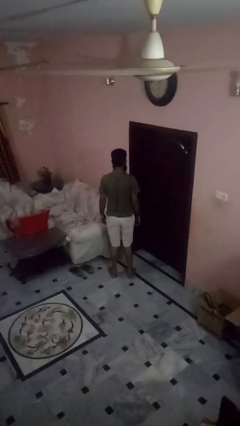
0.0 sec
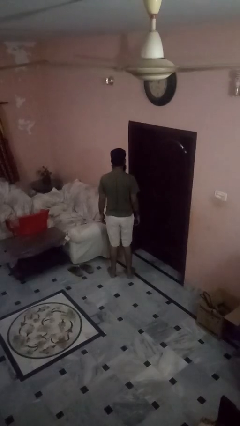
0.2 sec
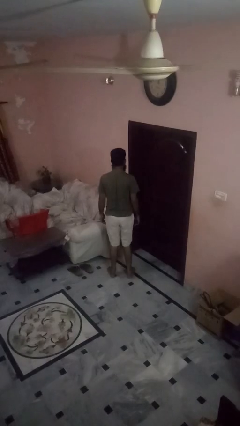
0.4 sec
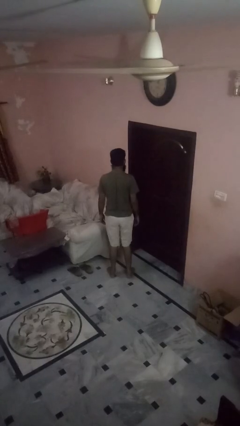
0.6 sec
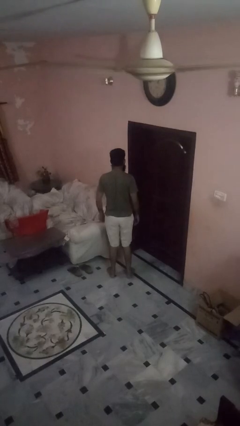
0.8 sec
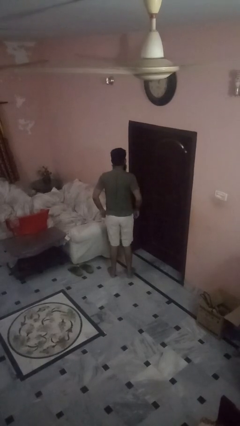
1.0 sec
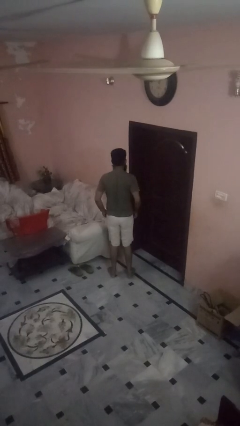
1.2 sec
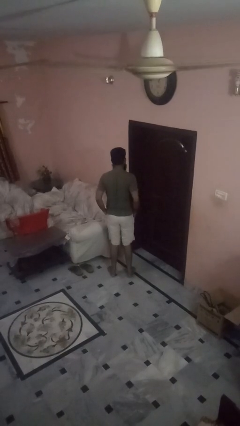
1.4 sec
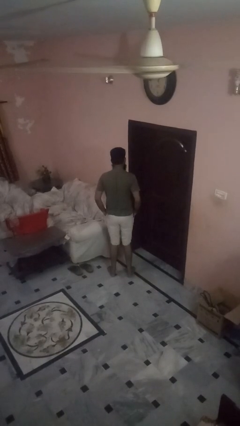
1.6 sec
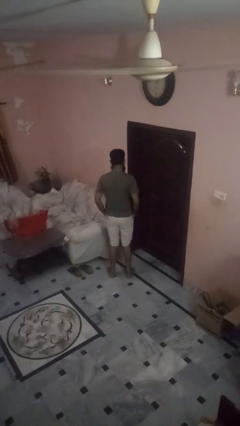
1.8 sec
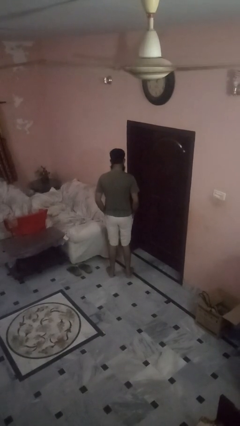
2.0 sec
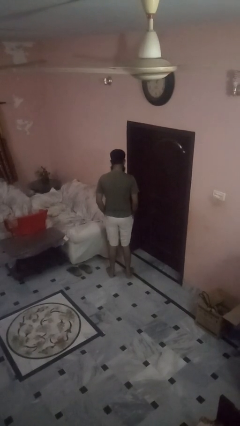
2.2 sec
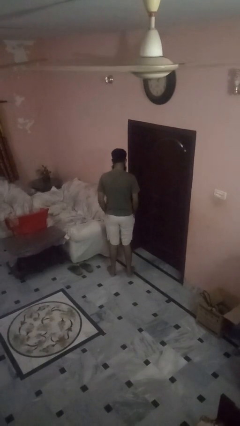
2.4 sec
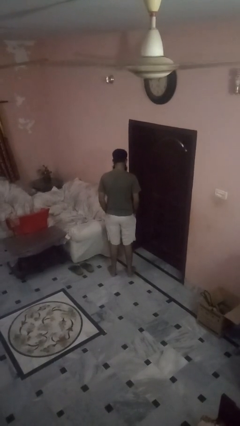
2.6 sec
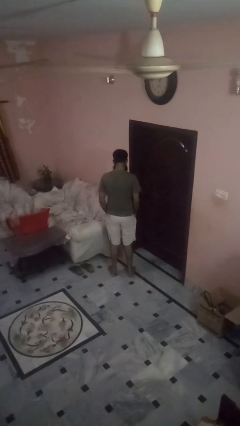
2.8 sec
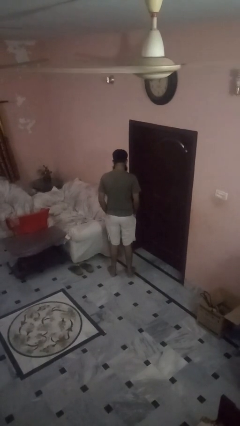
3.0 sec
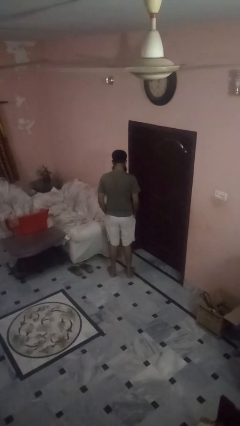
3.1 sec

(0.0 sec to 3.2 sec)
person puts hands in back pockets

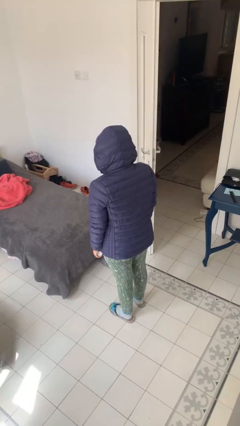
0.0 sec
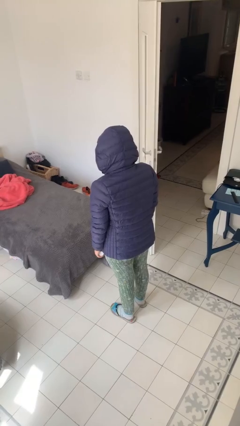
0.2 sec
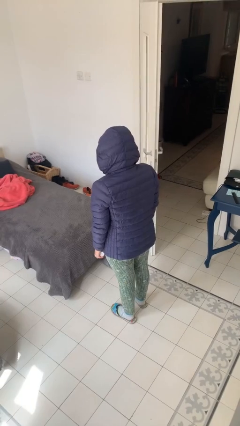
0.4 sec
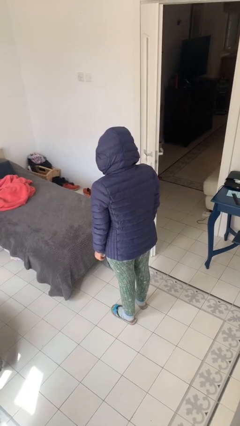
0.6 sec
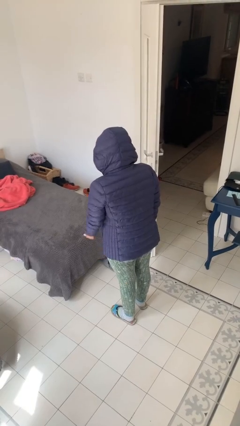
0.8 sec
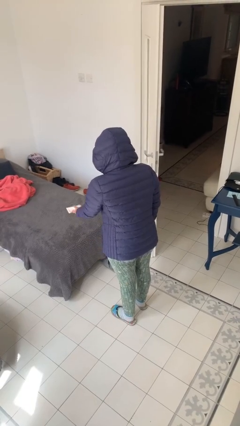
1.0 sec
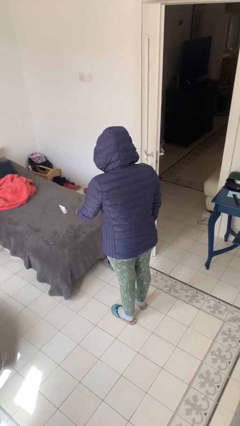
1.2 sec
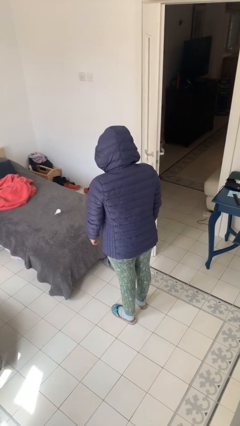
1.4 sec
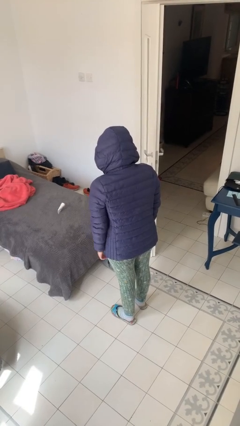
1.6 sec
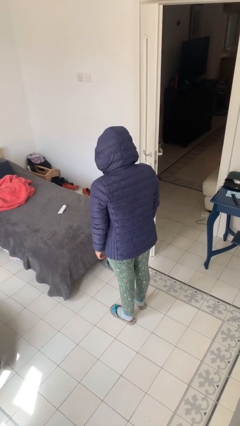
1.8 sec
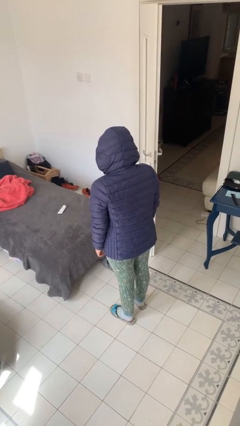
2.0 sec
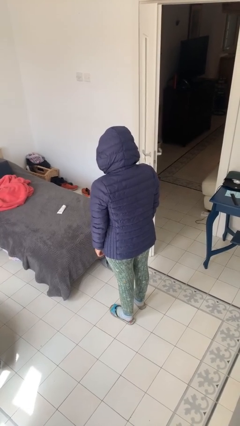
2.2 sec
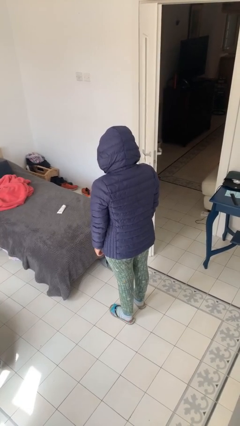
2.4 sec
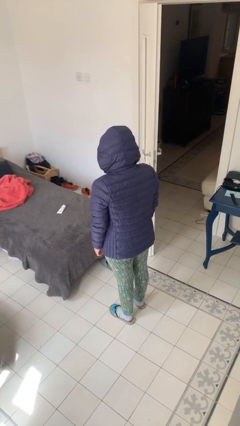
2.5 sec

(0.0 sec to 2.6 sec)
person throws object on bed

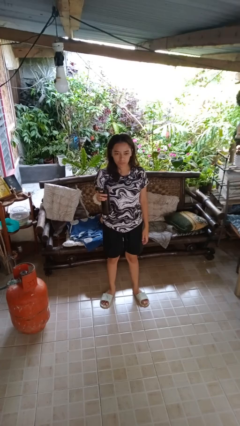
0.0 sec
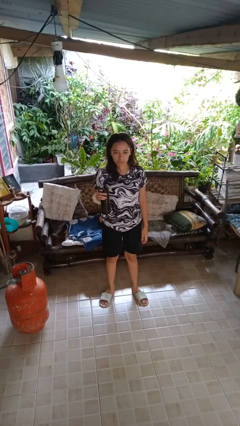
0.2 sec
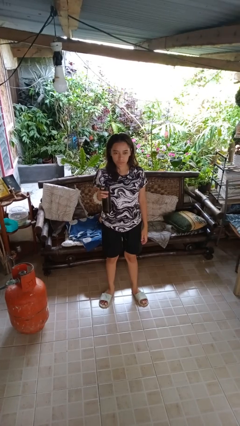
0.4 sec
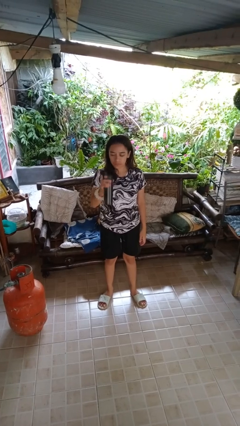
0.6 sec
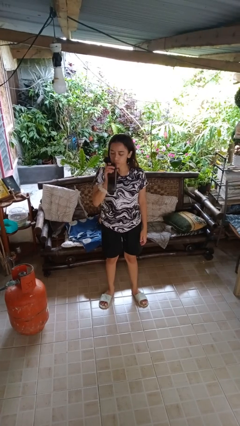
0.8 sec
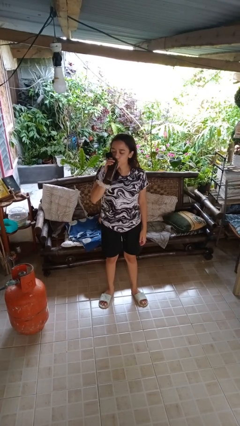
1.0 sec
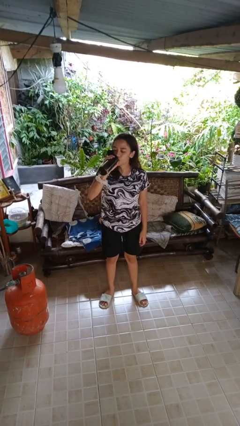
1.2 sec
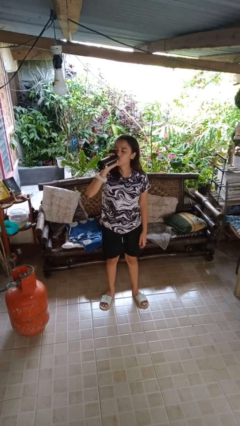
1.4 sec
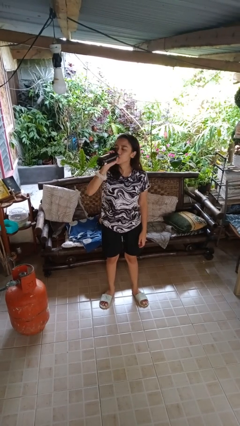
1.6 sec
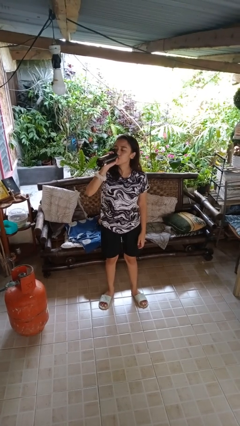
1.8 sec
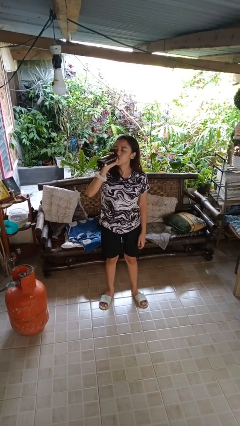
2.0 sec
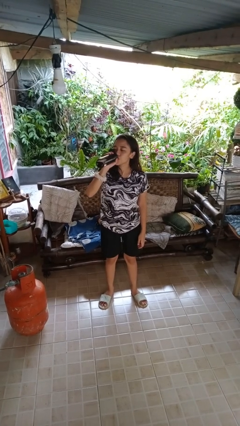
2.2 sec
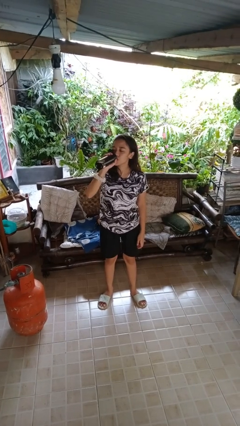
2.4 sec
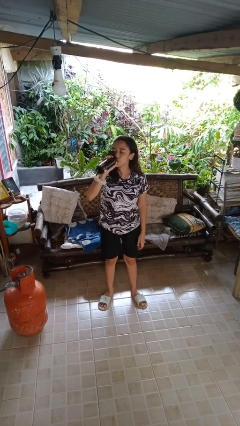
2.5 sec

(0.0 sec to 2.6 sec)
person drinks from bottle

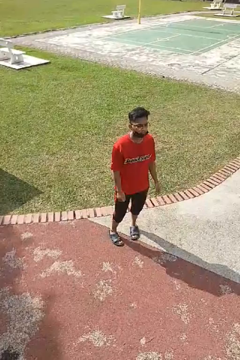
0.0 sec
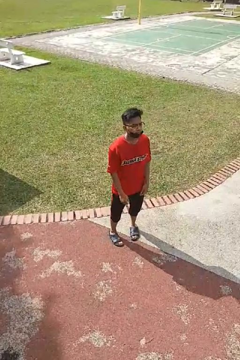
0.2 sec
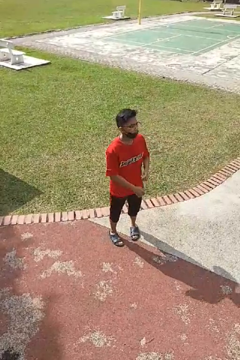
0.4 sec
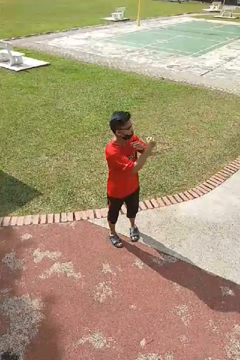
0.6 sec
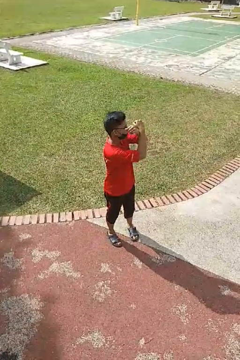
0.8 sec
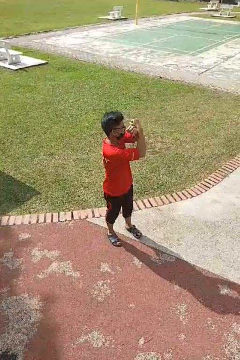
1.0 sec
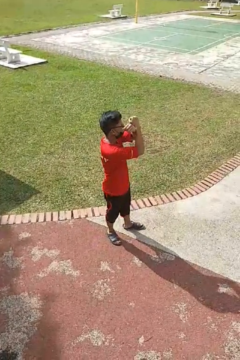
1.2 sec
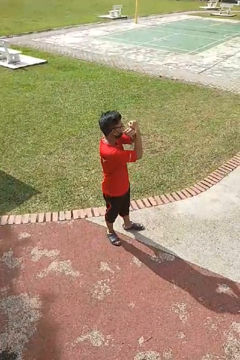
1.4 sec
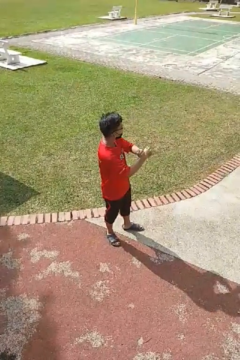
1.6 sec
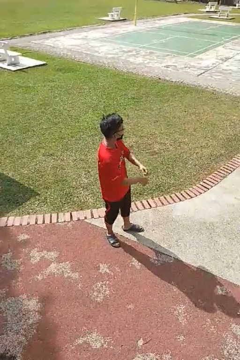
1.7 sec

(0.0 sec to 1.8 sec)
person gestures arms x

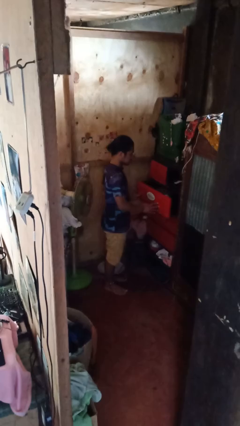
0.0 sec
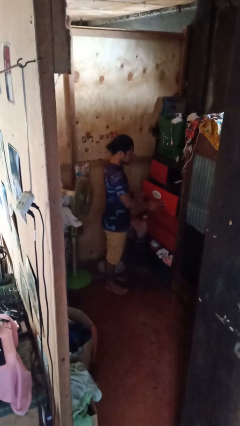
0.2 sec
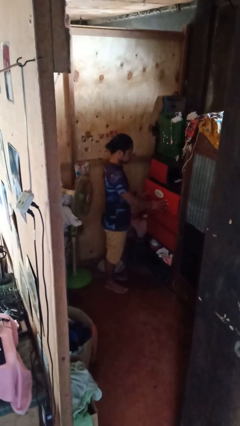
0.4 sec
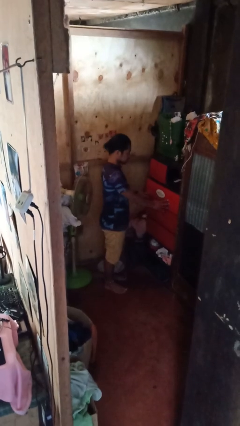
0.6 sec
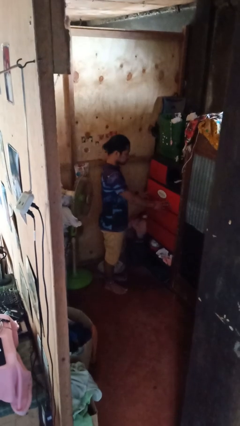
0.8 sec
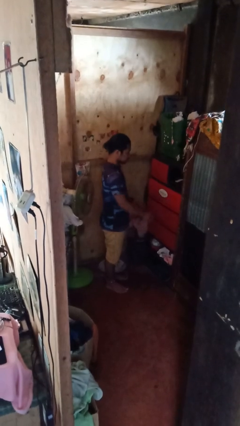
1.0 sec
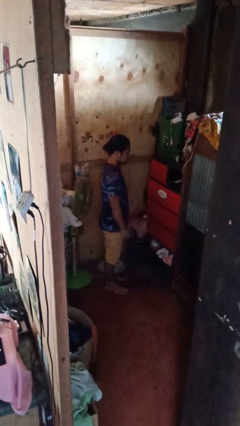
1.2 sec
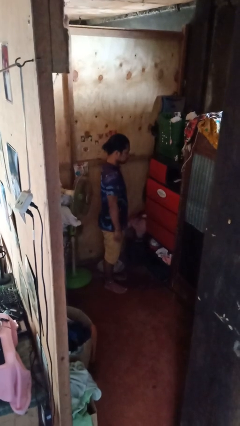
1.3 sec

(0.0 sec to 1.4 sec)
person closes dresser drawer

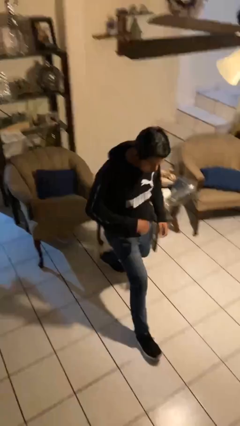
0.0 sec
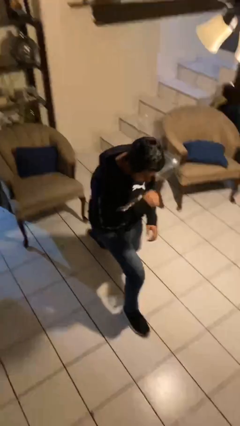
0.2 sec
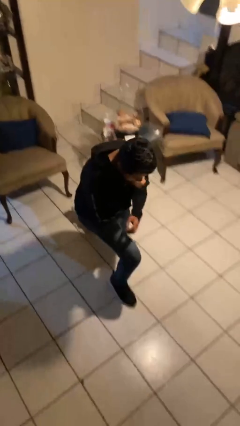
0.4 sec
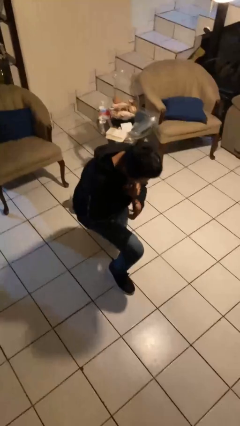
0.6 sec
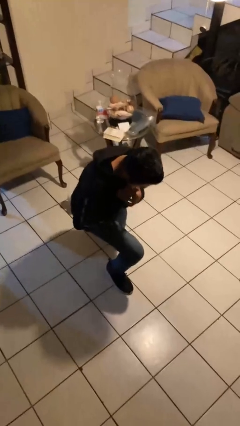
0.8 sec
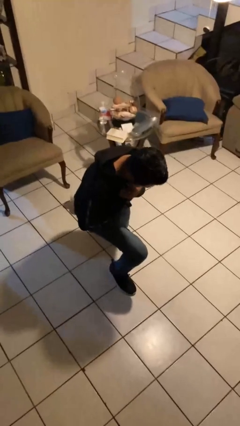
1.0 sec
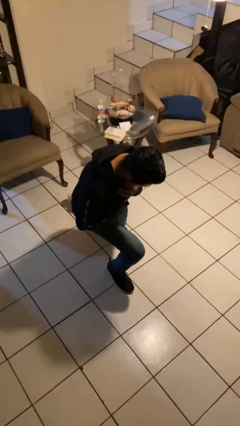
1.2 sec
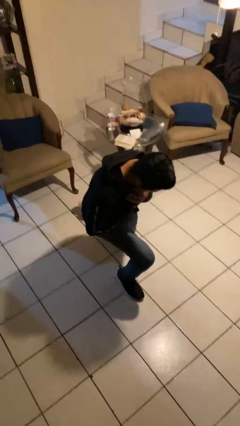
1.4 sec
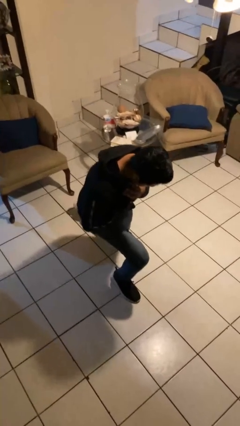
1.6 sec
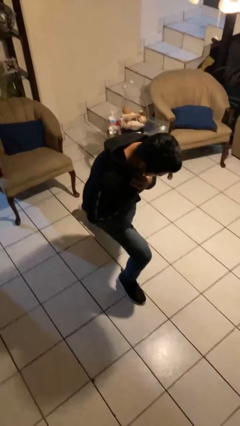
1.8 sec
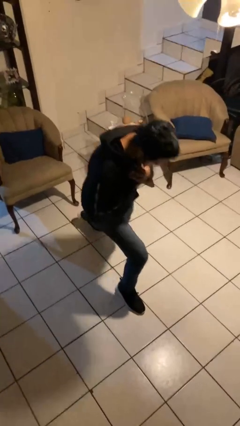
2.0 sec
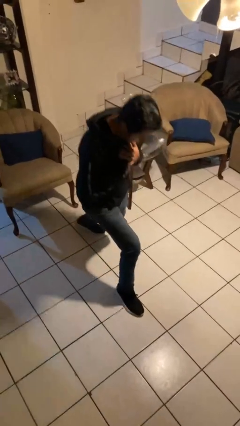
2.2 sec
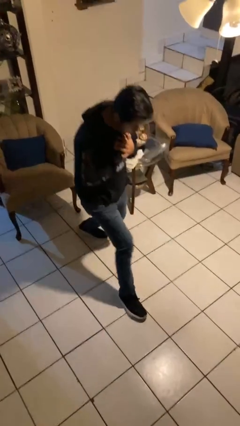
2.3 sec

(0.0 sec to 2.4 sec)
person exercises with lunges

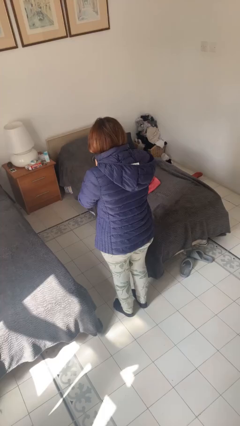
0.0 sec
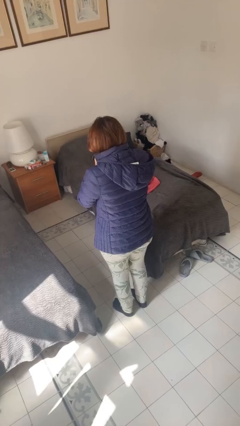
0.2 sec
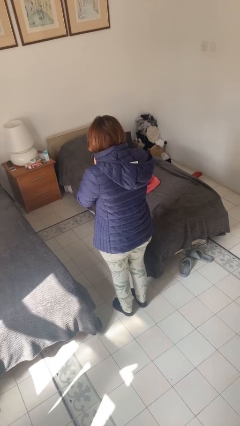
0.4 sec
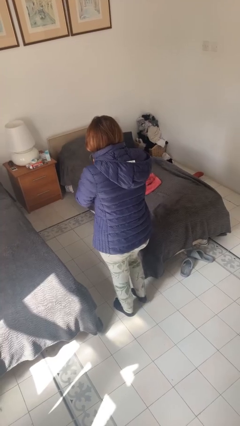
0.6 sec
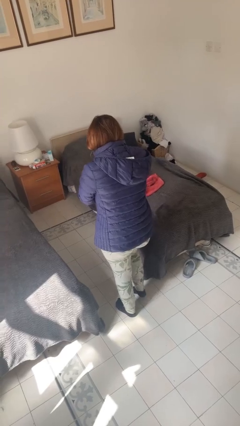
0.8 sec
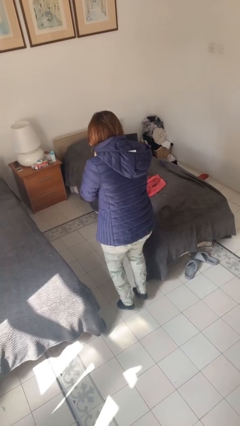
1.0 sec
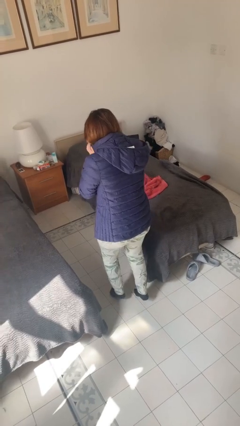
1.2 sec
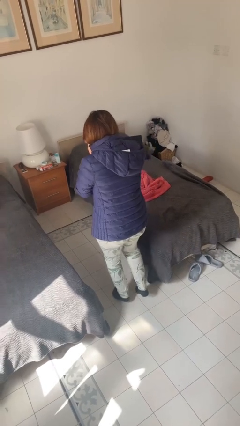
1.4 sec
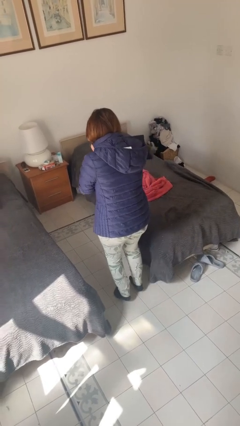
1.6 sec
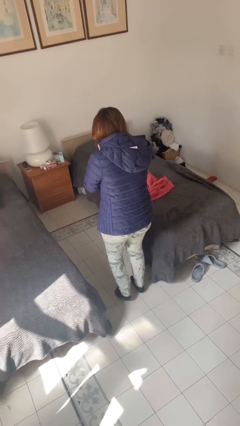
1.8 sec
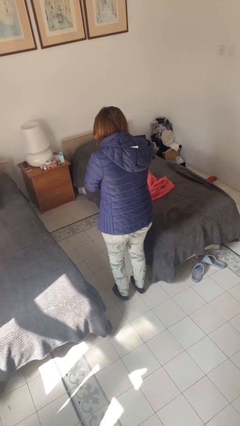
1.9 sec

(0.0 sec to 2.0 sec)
person walks tiptoe

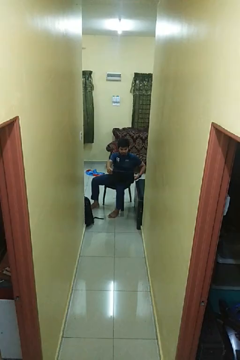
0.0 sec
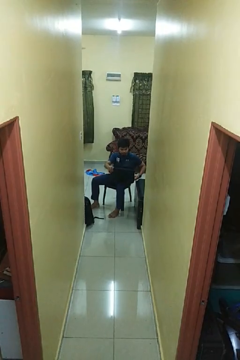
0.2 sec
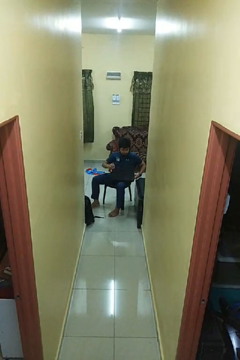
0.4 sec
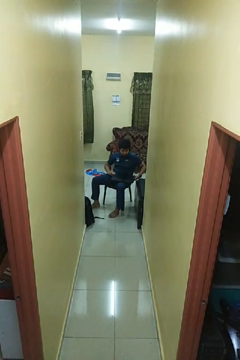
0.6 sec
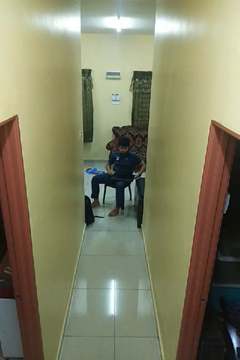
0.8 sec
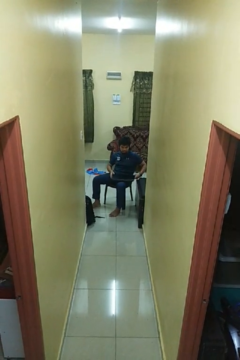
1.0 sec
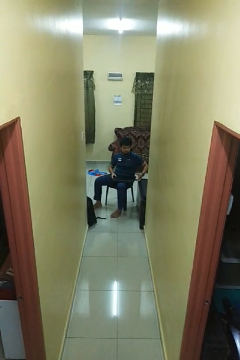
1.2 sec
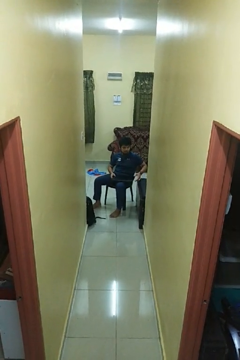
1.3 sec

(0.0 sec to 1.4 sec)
person closes laptop
